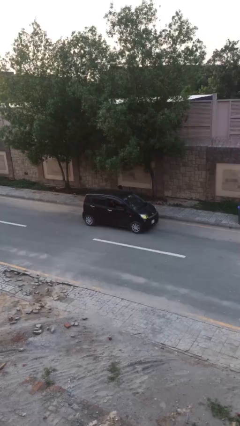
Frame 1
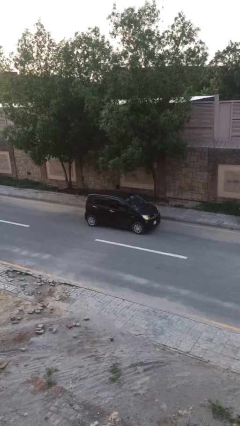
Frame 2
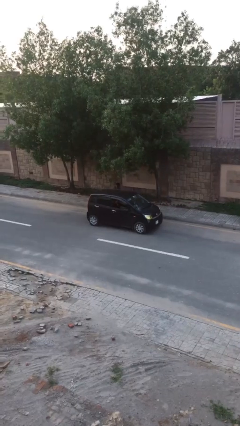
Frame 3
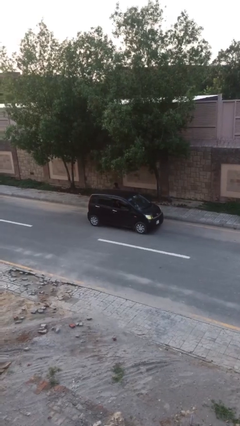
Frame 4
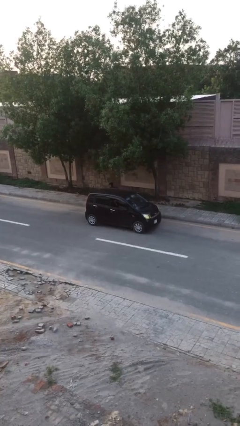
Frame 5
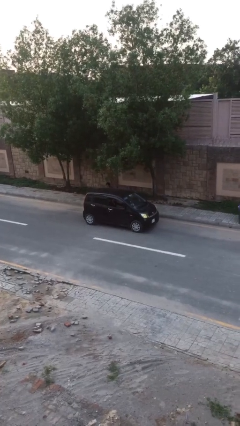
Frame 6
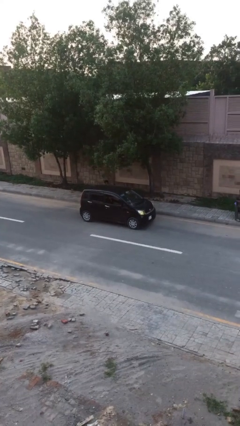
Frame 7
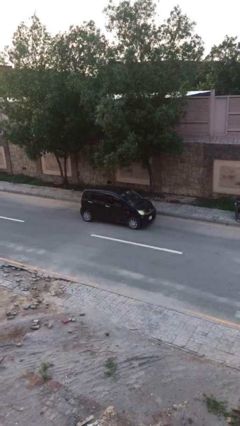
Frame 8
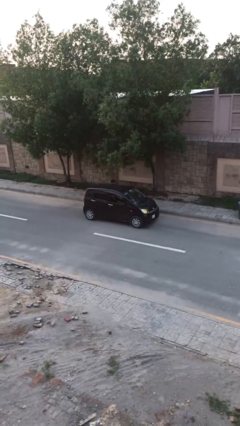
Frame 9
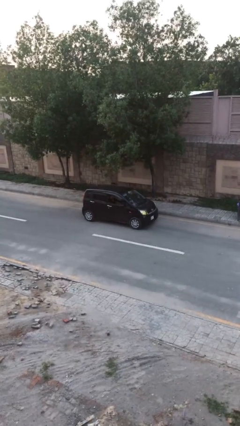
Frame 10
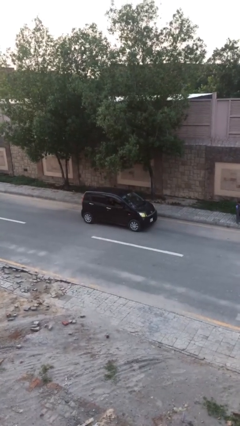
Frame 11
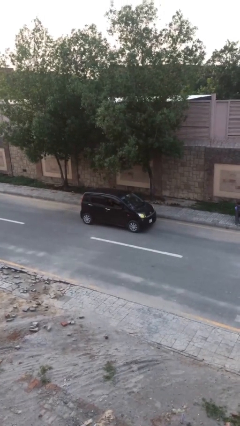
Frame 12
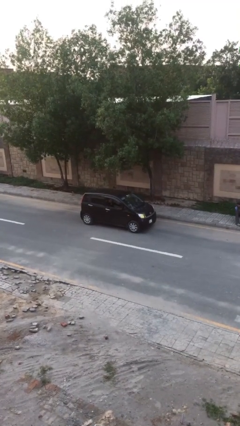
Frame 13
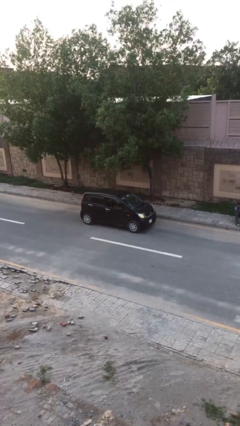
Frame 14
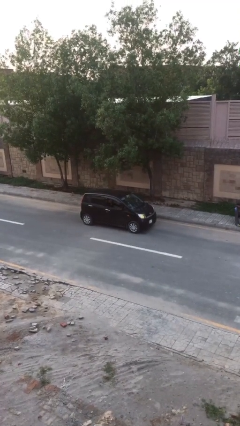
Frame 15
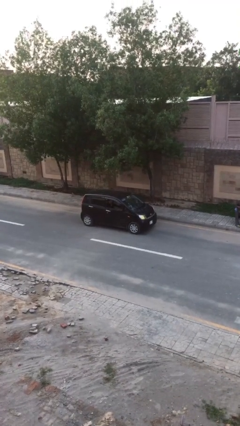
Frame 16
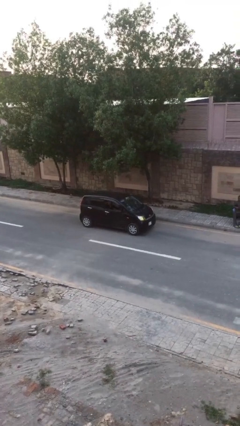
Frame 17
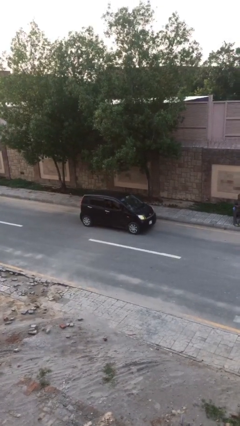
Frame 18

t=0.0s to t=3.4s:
car picks up person

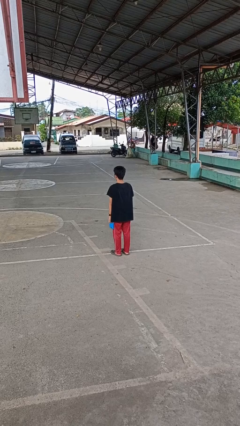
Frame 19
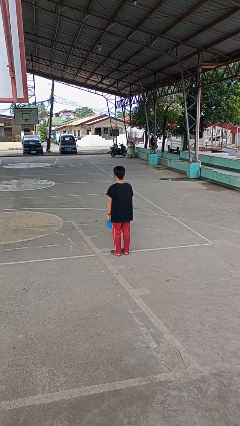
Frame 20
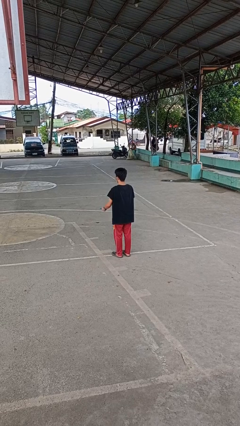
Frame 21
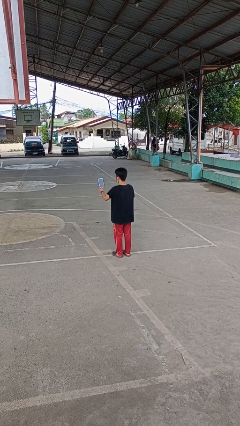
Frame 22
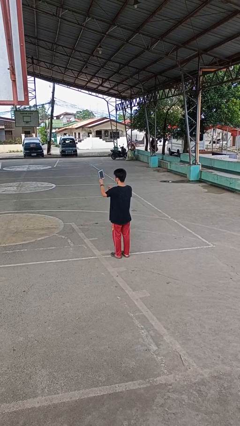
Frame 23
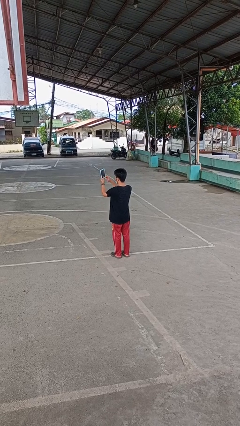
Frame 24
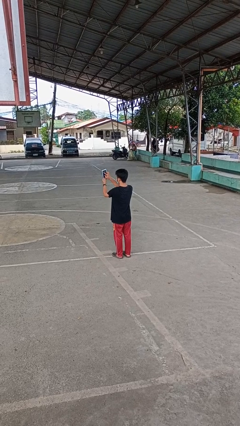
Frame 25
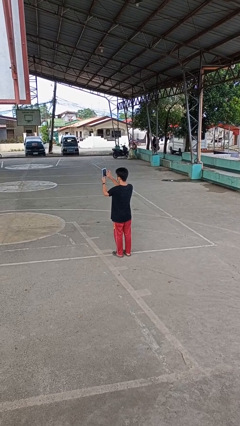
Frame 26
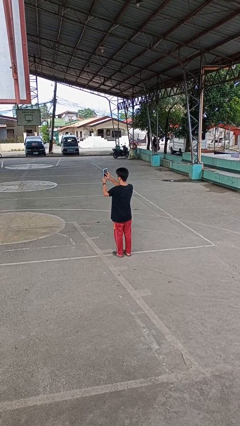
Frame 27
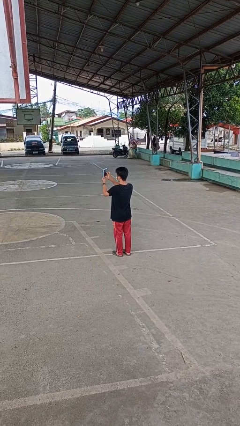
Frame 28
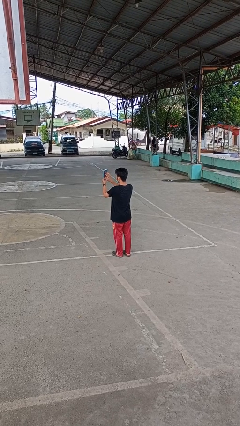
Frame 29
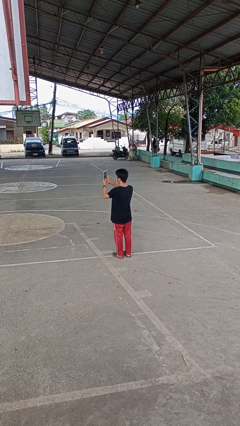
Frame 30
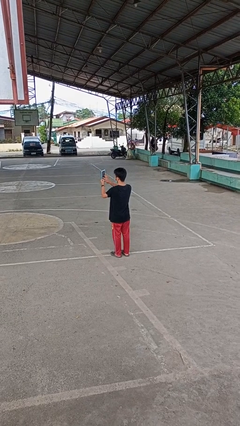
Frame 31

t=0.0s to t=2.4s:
person interacts with tablet

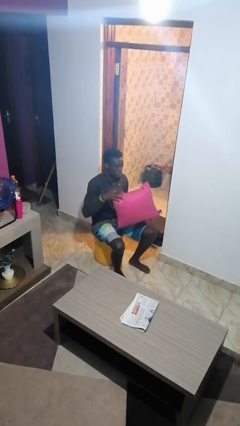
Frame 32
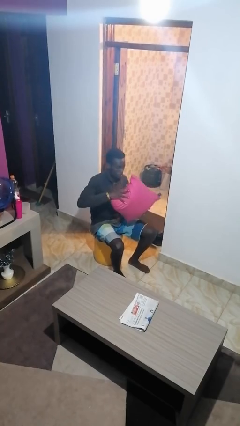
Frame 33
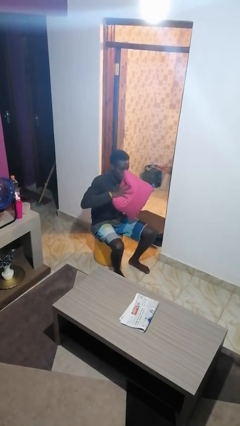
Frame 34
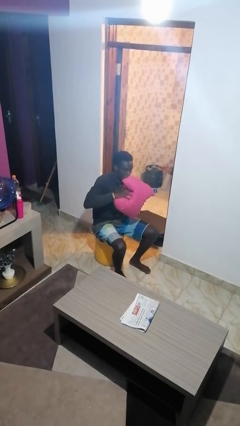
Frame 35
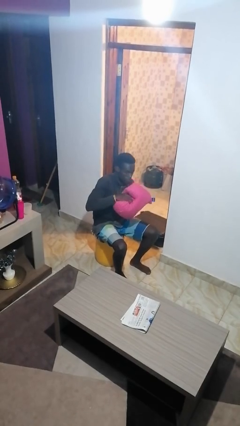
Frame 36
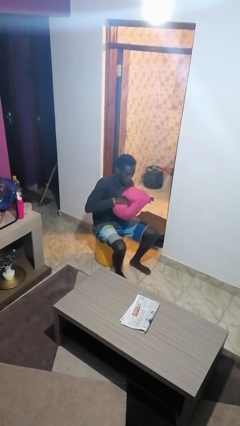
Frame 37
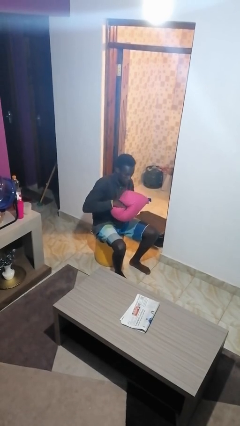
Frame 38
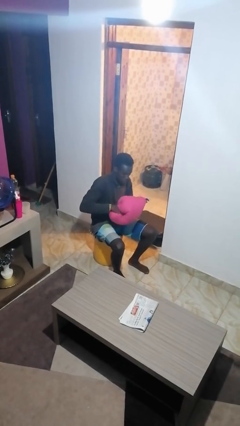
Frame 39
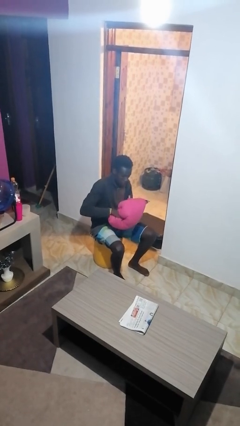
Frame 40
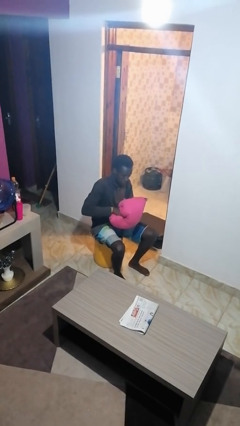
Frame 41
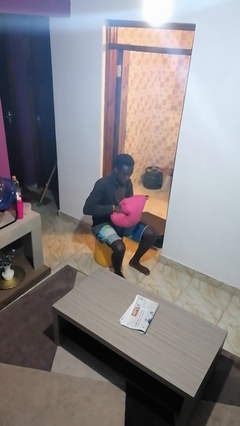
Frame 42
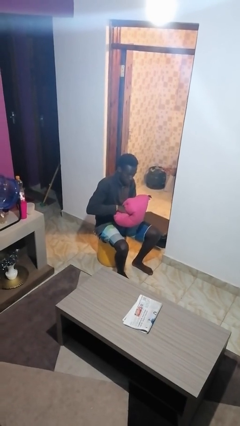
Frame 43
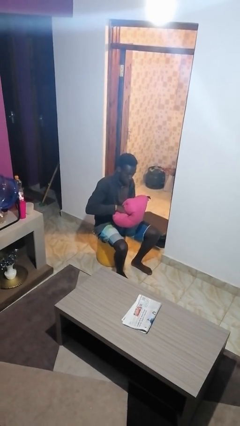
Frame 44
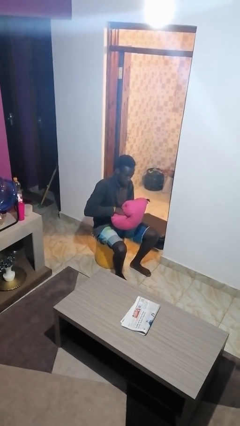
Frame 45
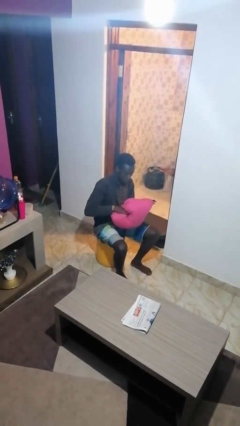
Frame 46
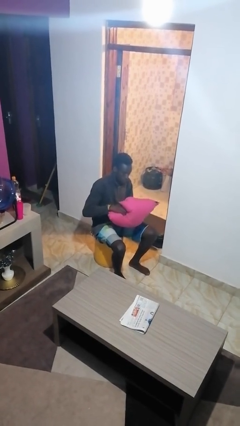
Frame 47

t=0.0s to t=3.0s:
person squeezes object

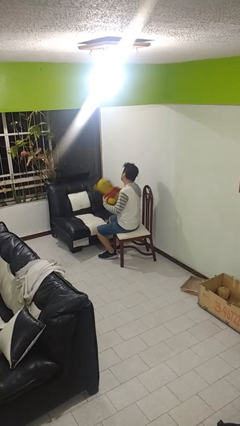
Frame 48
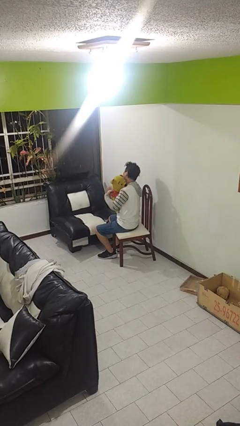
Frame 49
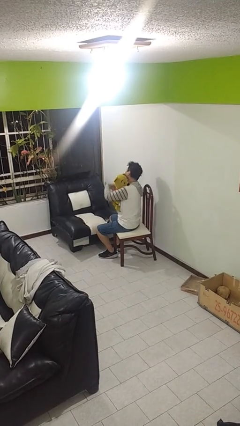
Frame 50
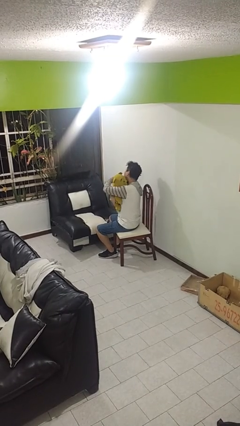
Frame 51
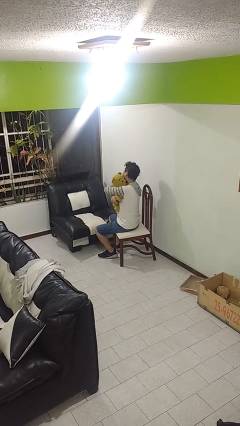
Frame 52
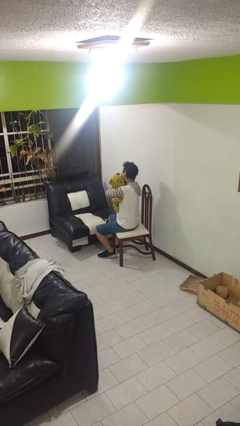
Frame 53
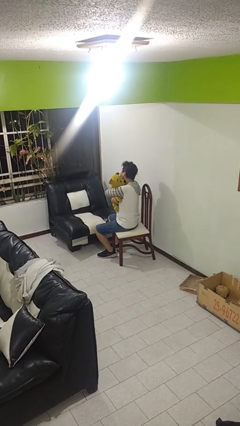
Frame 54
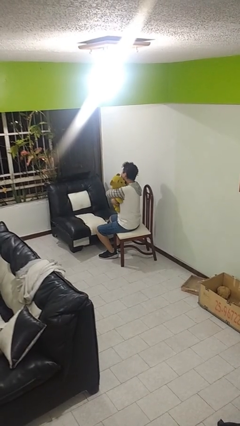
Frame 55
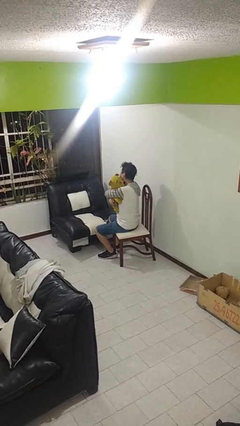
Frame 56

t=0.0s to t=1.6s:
person hugs stuffed animal

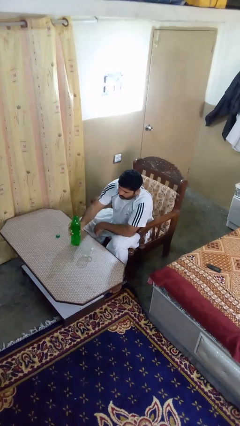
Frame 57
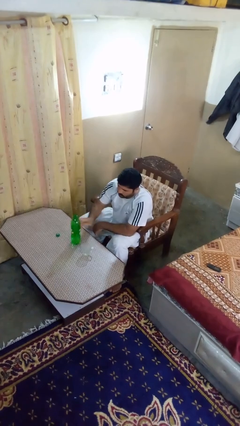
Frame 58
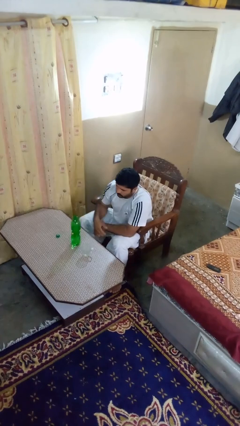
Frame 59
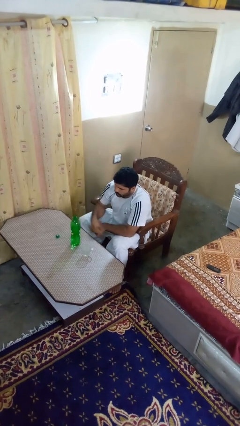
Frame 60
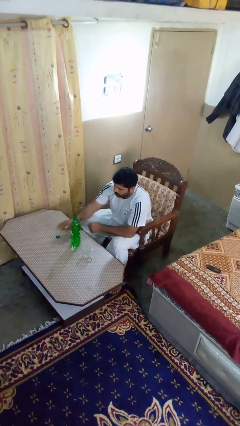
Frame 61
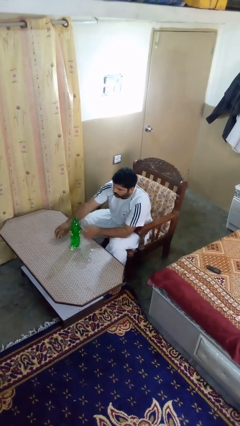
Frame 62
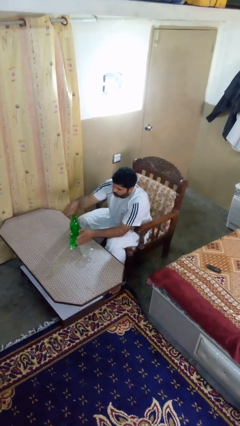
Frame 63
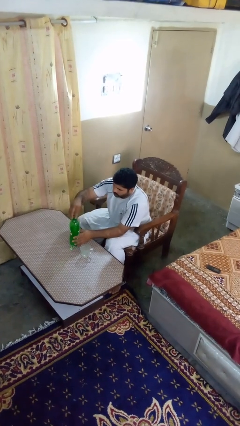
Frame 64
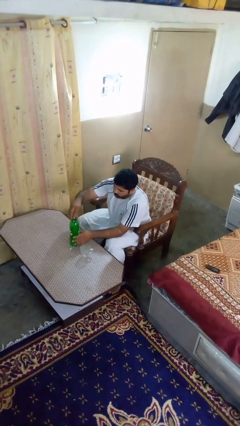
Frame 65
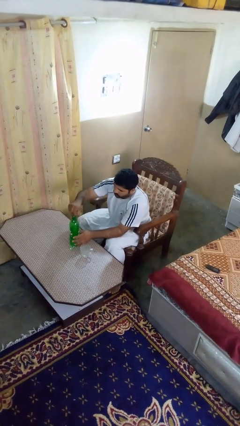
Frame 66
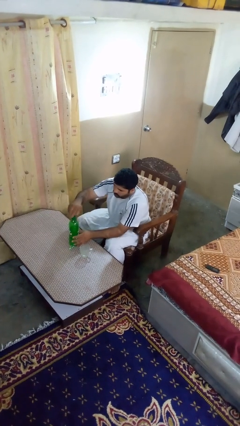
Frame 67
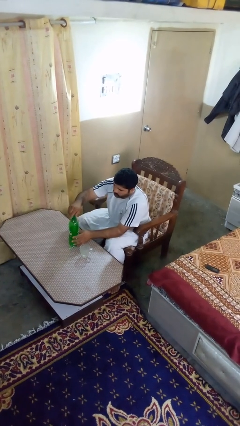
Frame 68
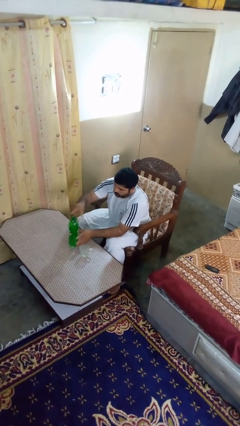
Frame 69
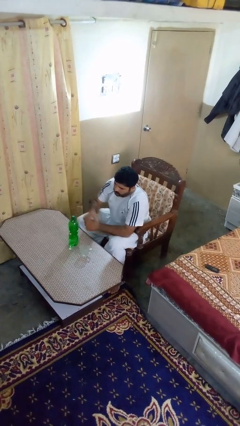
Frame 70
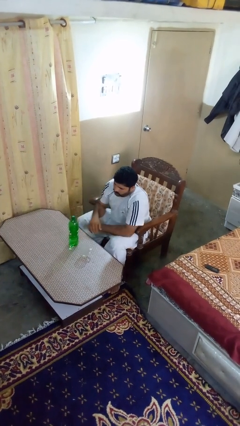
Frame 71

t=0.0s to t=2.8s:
person screws lid to bottle

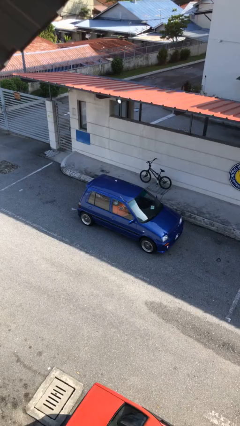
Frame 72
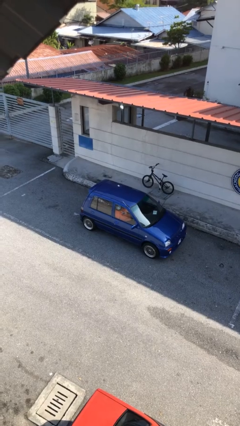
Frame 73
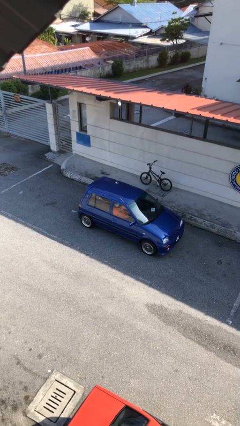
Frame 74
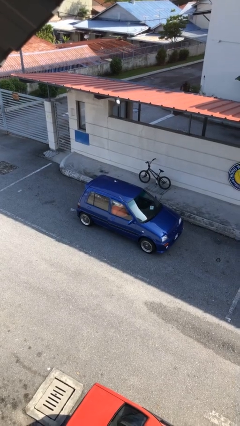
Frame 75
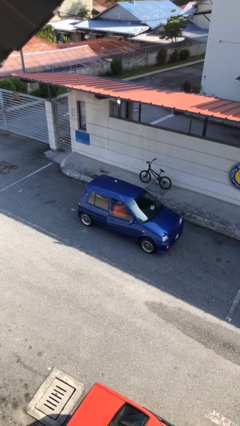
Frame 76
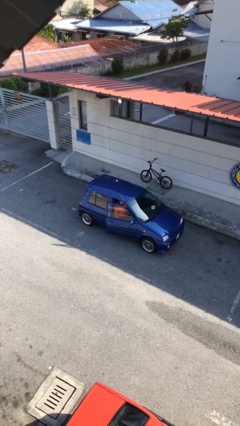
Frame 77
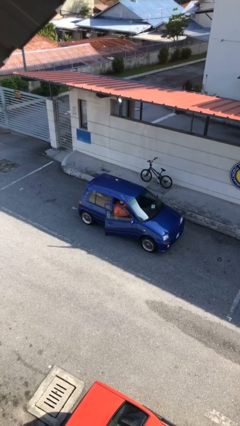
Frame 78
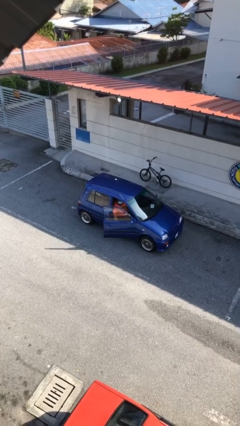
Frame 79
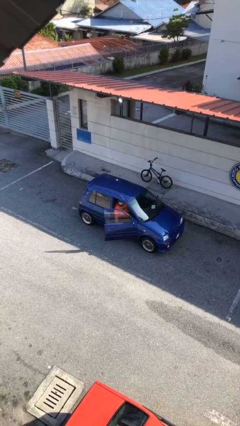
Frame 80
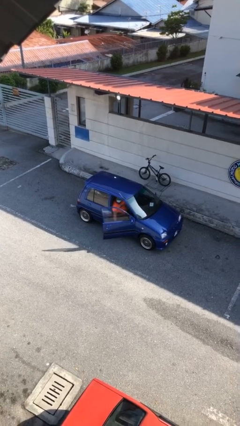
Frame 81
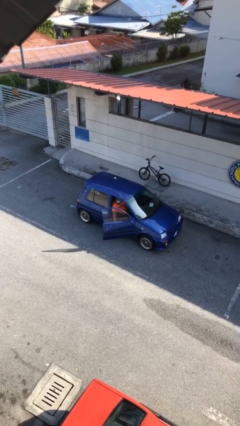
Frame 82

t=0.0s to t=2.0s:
person opens car door

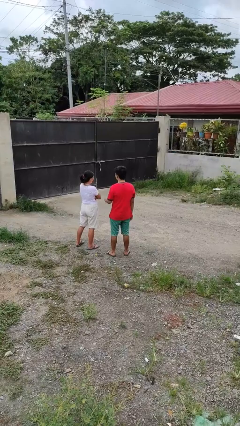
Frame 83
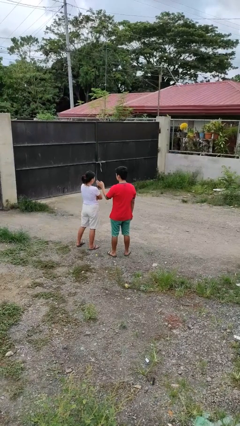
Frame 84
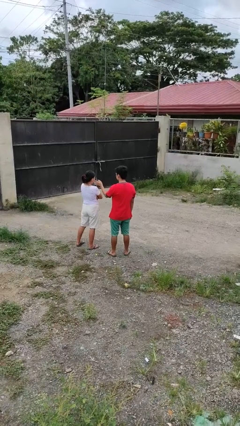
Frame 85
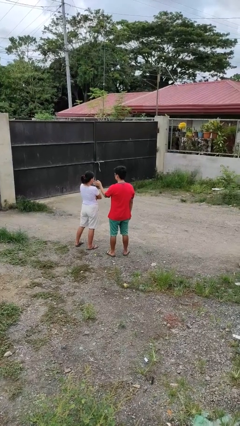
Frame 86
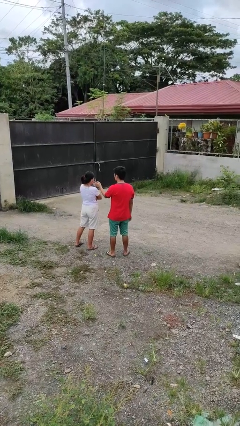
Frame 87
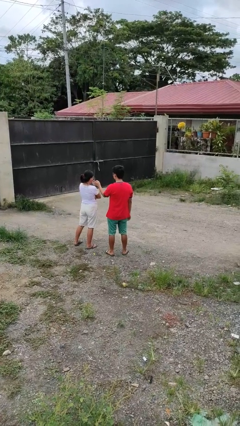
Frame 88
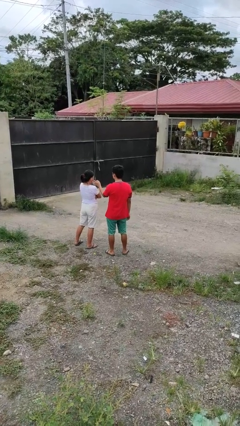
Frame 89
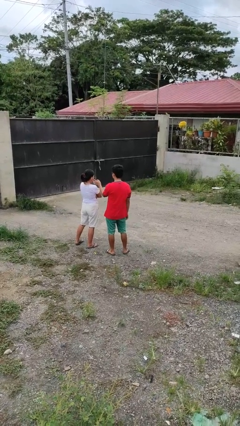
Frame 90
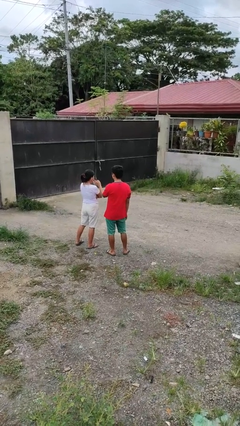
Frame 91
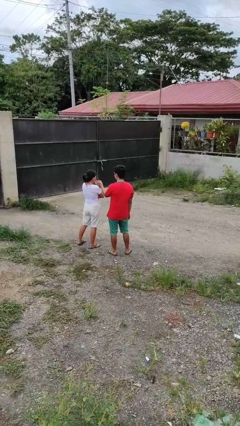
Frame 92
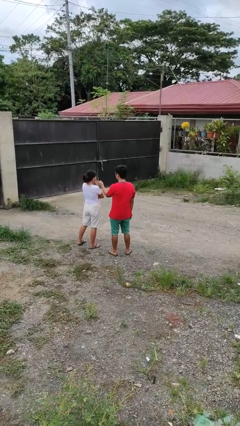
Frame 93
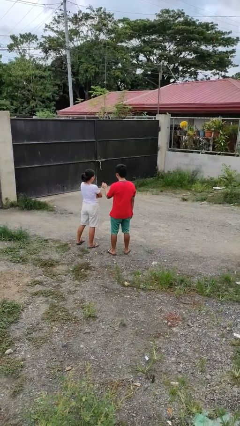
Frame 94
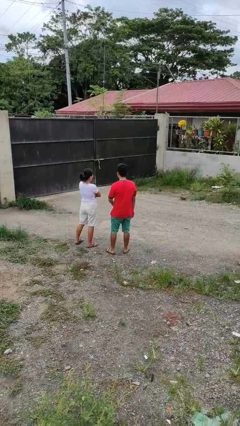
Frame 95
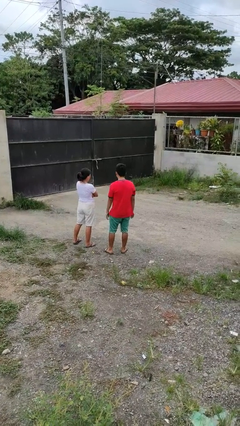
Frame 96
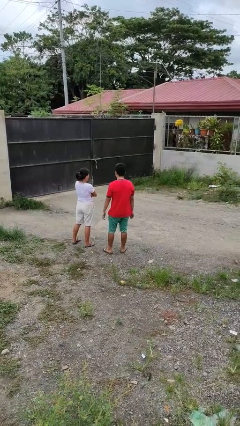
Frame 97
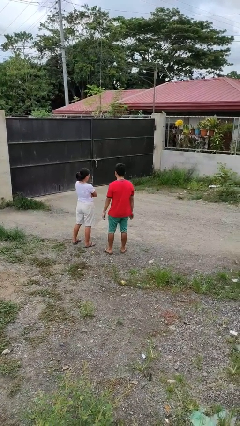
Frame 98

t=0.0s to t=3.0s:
person touches face of person
